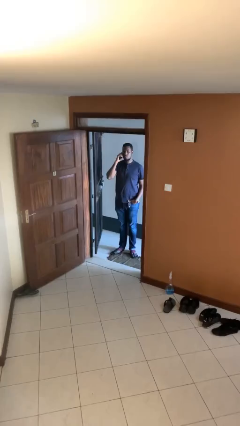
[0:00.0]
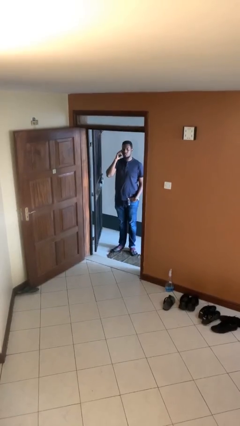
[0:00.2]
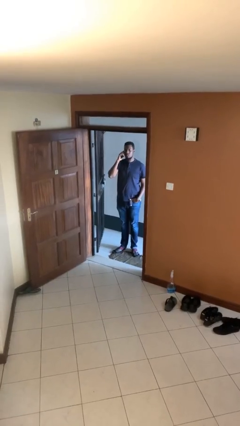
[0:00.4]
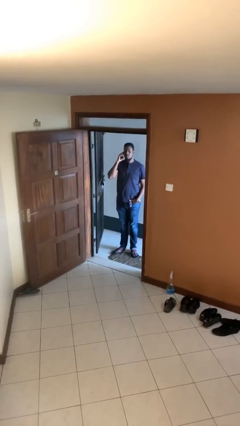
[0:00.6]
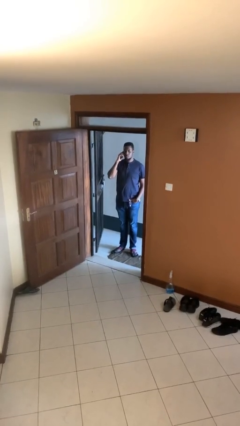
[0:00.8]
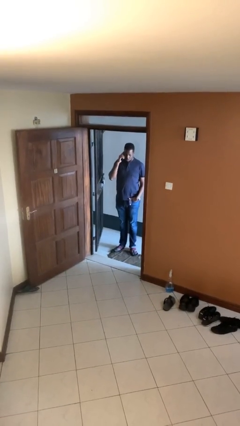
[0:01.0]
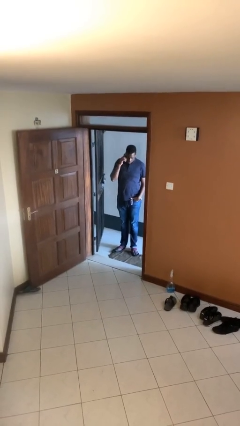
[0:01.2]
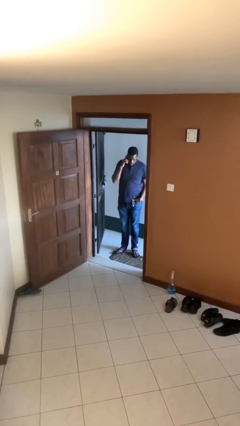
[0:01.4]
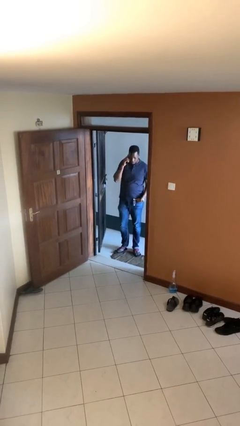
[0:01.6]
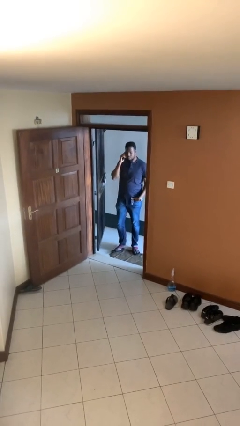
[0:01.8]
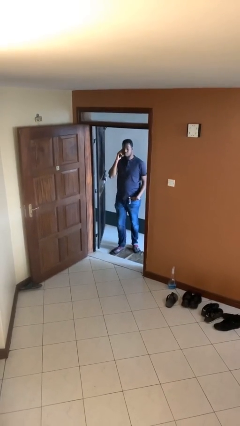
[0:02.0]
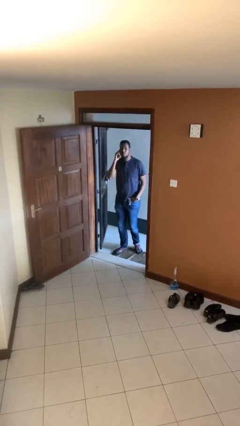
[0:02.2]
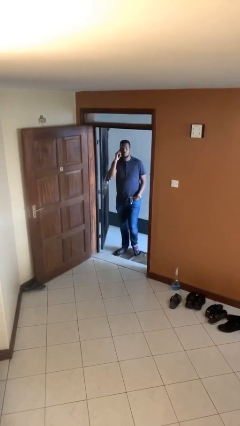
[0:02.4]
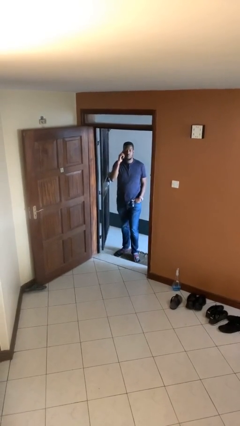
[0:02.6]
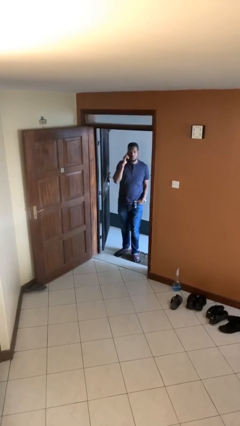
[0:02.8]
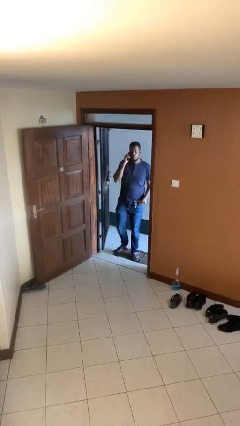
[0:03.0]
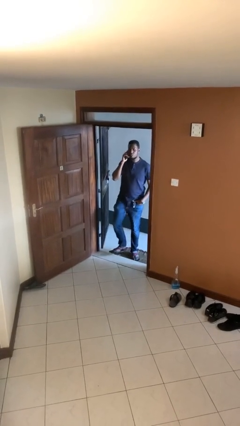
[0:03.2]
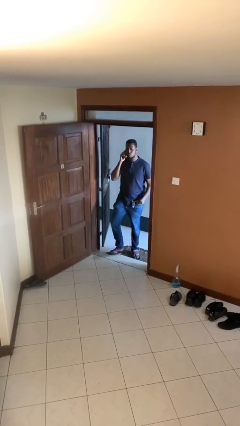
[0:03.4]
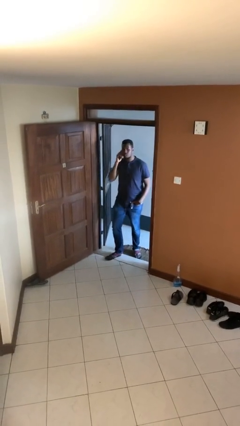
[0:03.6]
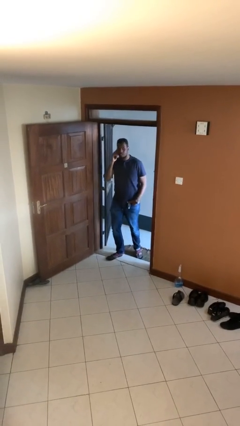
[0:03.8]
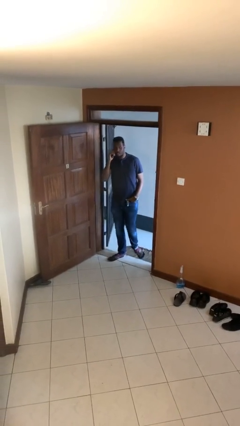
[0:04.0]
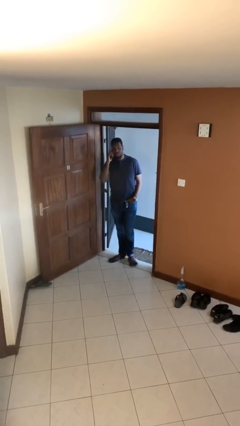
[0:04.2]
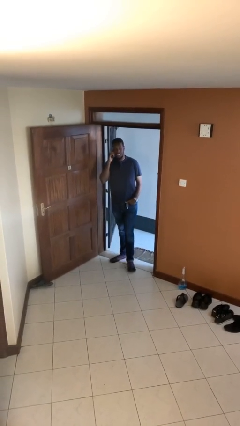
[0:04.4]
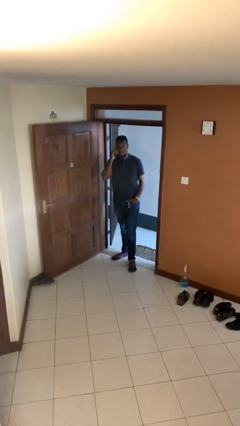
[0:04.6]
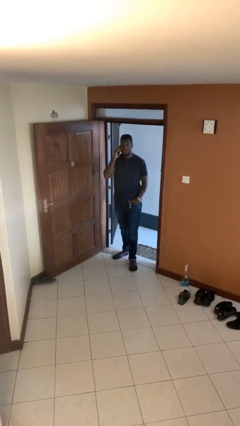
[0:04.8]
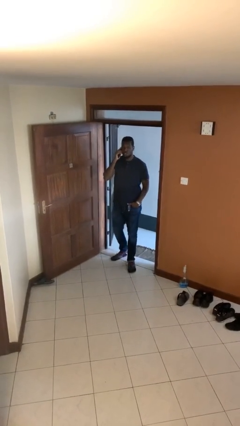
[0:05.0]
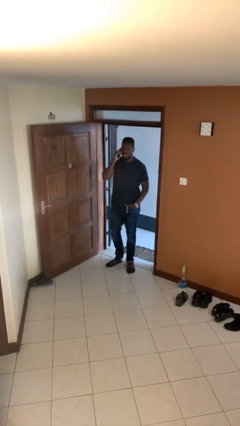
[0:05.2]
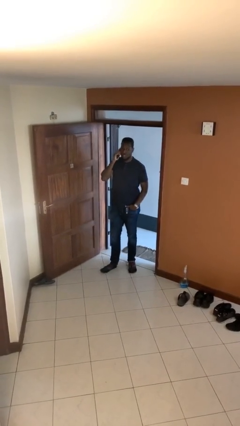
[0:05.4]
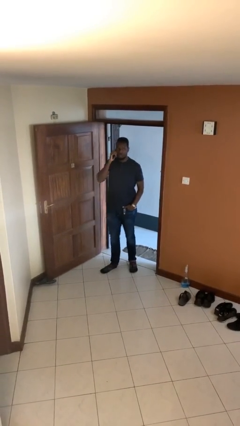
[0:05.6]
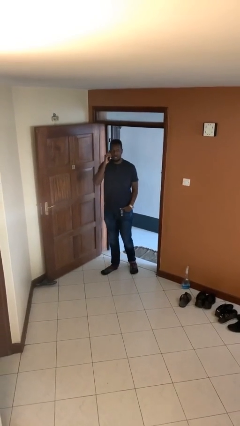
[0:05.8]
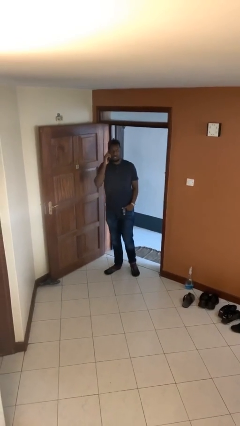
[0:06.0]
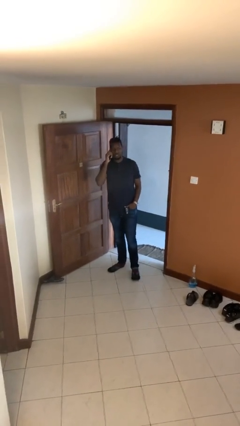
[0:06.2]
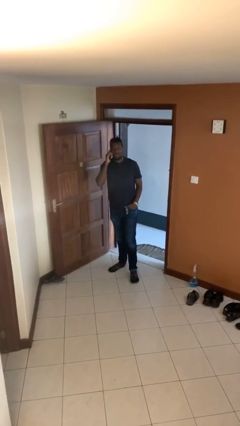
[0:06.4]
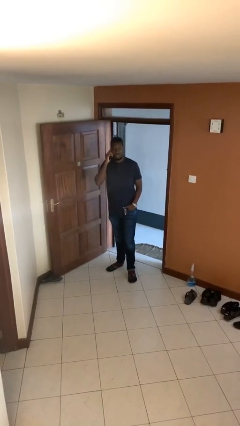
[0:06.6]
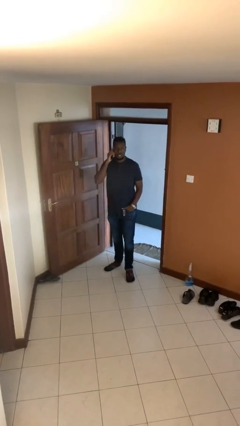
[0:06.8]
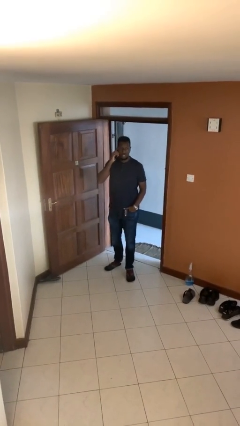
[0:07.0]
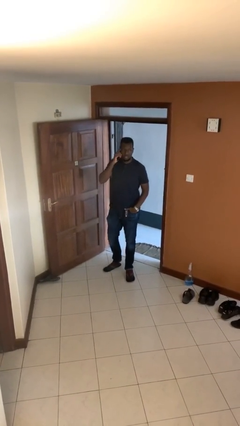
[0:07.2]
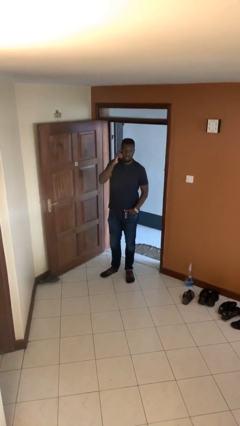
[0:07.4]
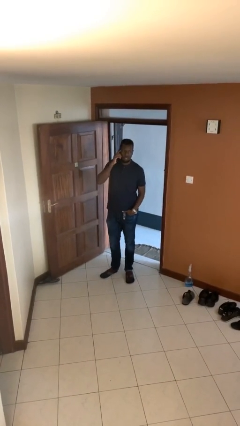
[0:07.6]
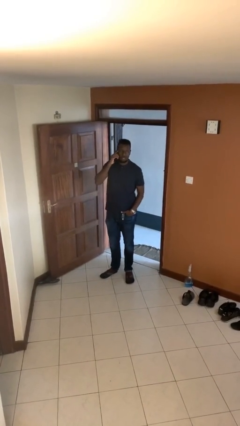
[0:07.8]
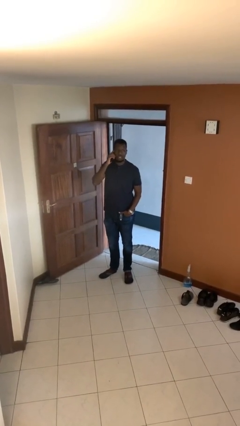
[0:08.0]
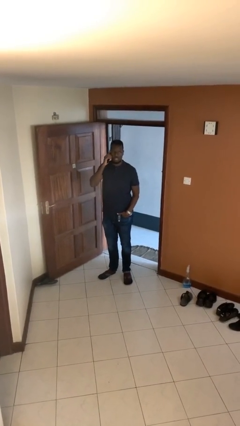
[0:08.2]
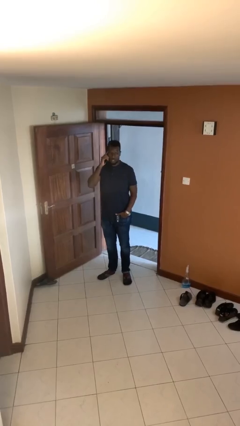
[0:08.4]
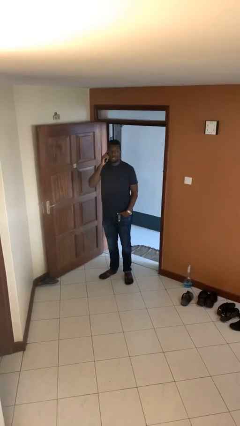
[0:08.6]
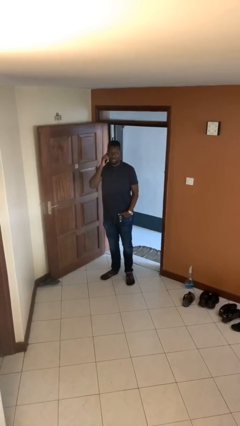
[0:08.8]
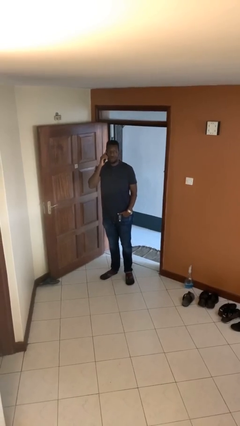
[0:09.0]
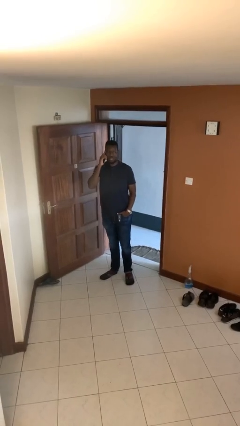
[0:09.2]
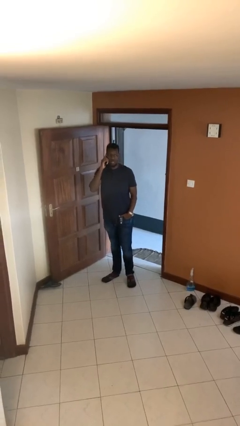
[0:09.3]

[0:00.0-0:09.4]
person enters scene through structure

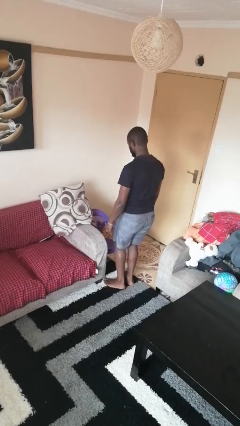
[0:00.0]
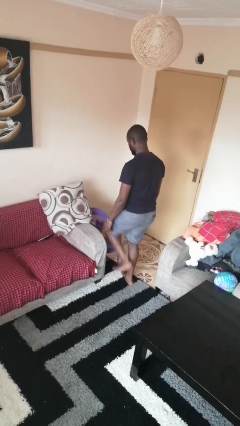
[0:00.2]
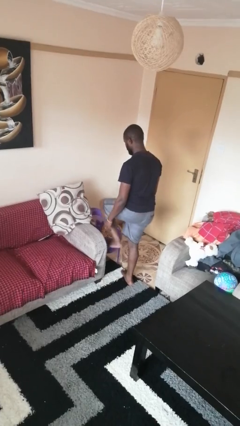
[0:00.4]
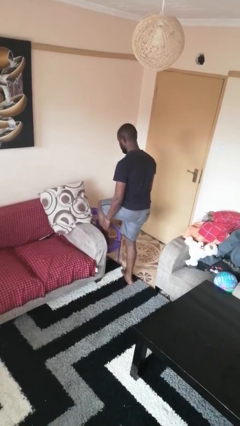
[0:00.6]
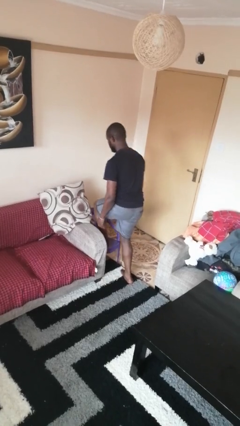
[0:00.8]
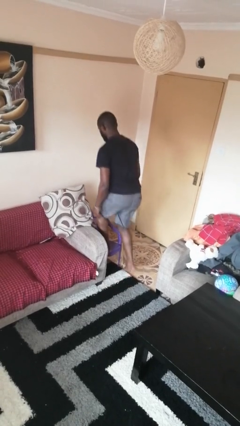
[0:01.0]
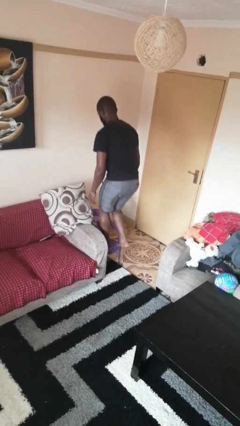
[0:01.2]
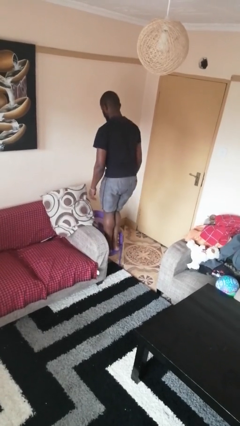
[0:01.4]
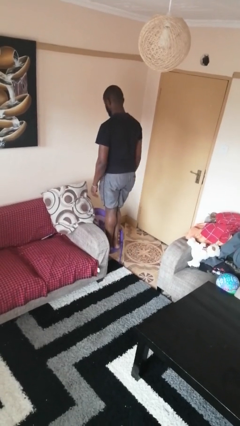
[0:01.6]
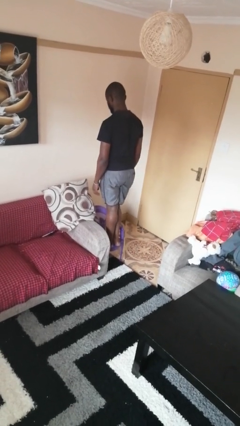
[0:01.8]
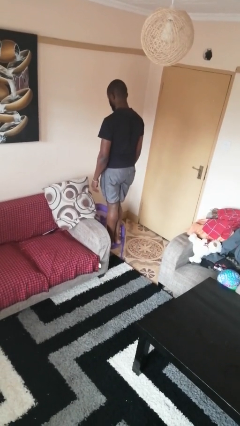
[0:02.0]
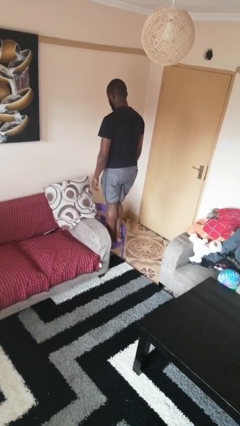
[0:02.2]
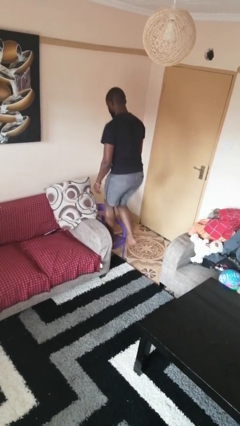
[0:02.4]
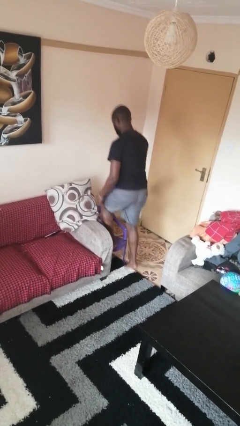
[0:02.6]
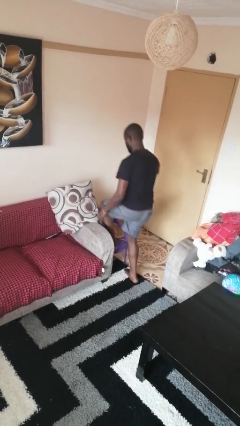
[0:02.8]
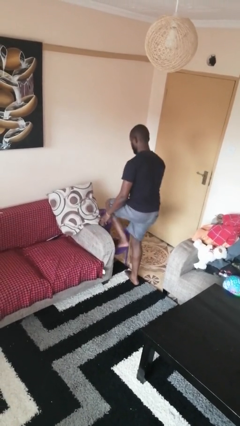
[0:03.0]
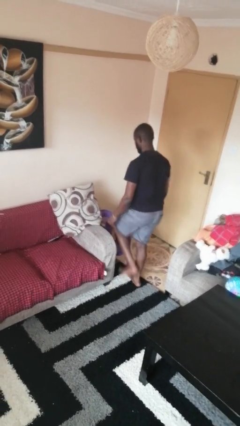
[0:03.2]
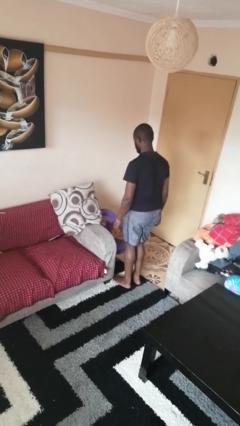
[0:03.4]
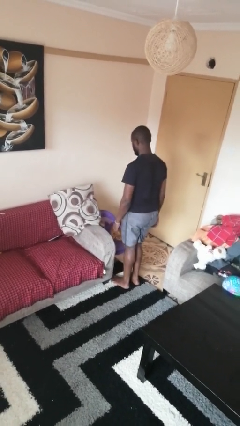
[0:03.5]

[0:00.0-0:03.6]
person climbs on chair

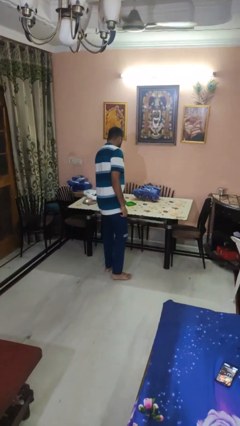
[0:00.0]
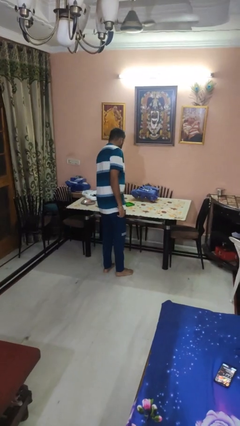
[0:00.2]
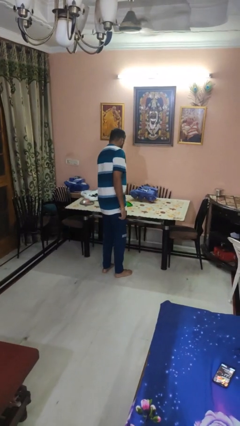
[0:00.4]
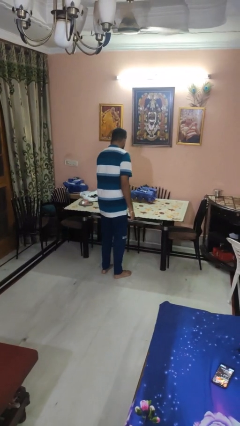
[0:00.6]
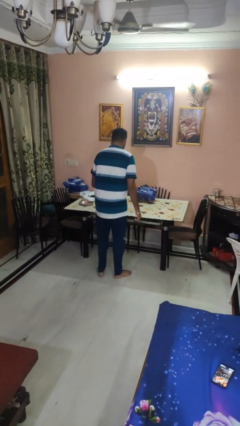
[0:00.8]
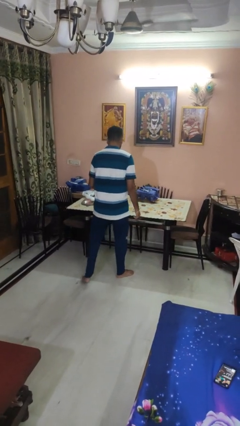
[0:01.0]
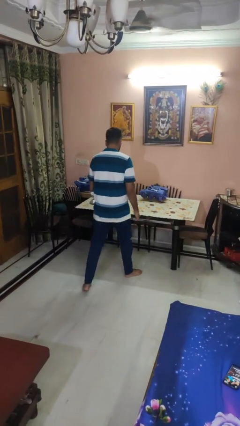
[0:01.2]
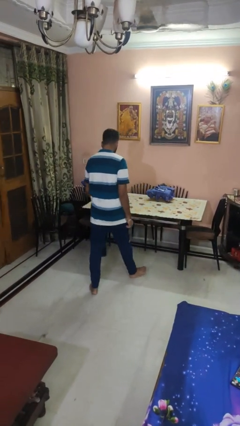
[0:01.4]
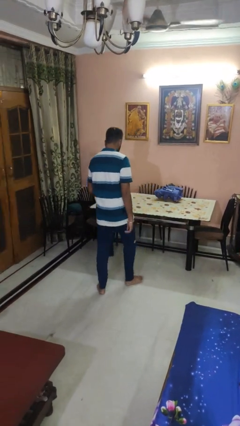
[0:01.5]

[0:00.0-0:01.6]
person picks up object from table

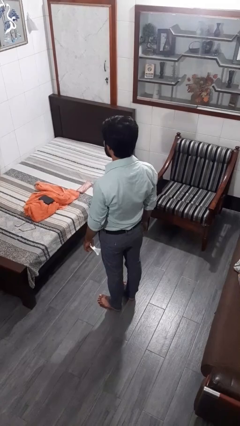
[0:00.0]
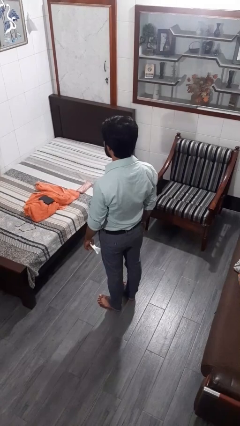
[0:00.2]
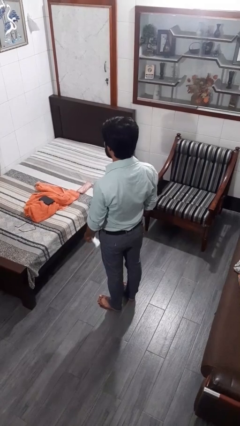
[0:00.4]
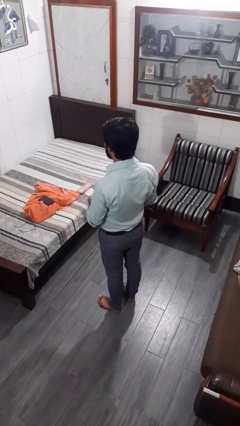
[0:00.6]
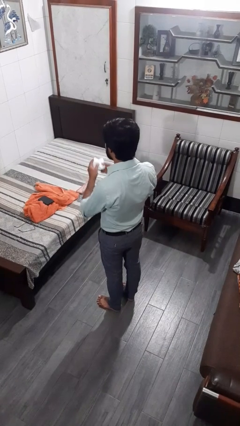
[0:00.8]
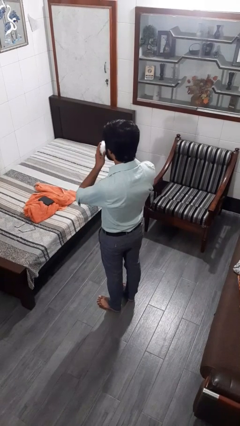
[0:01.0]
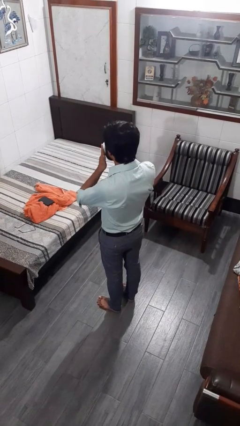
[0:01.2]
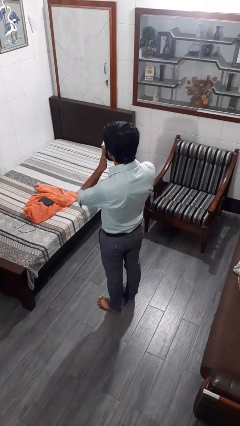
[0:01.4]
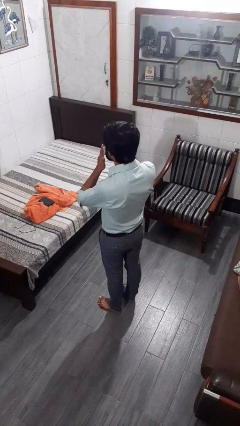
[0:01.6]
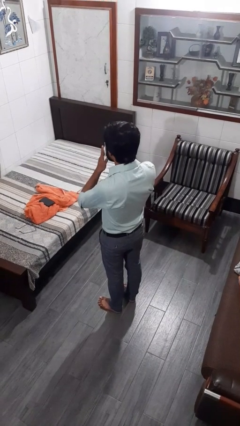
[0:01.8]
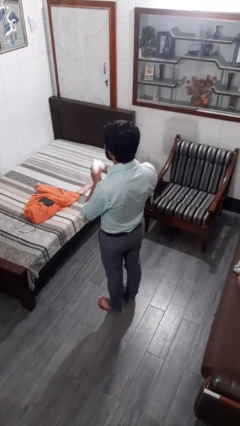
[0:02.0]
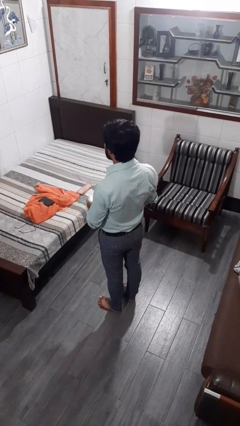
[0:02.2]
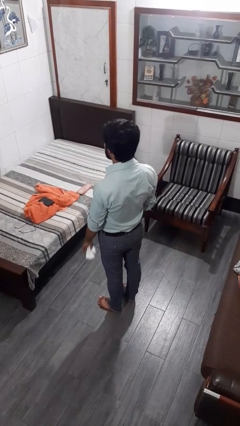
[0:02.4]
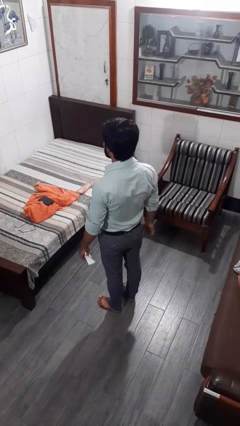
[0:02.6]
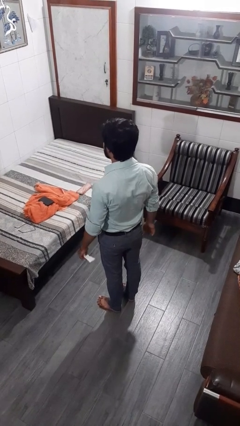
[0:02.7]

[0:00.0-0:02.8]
person blows nose

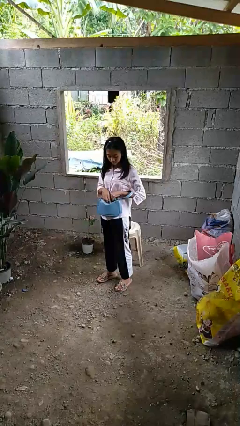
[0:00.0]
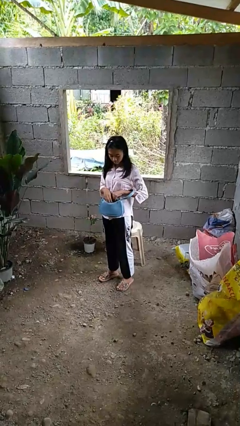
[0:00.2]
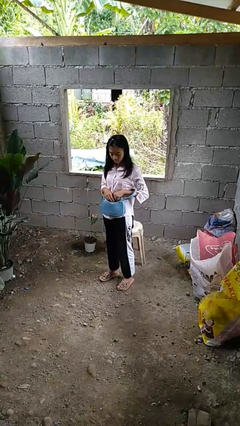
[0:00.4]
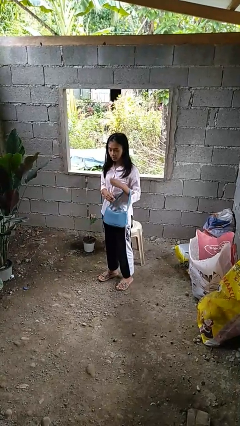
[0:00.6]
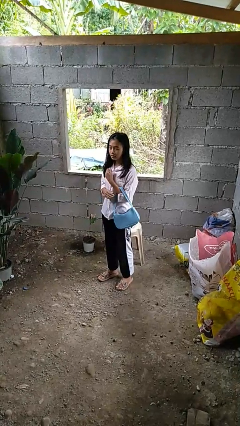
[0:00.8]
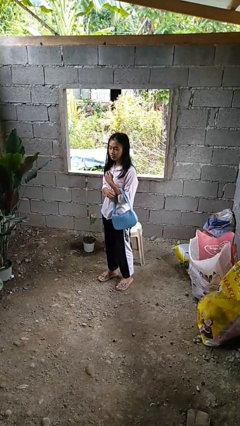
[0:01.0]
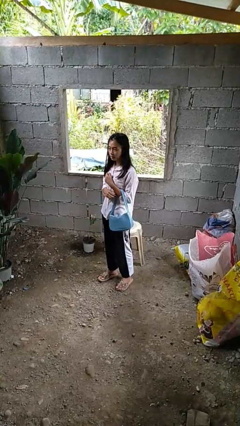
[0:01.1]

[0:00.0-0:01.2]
person puts object into purse
